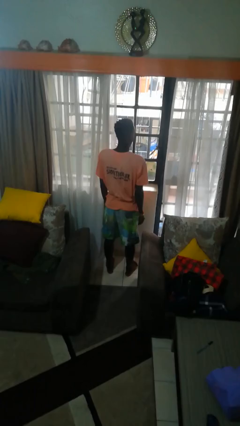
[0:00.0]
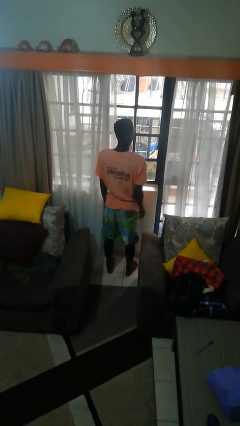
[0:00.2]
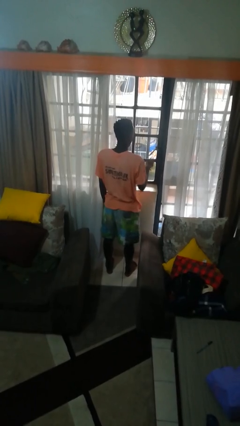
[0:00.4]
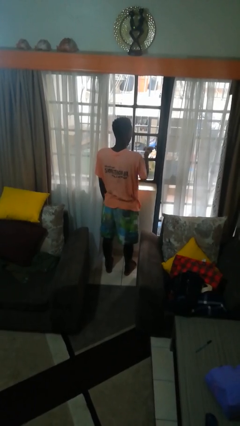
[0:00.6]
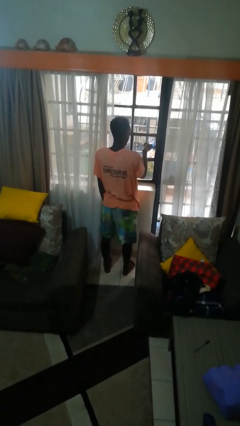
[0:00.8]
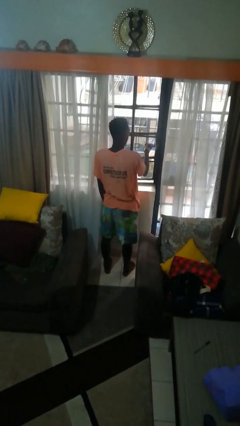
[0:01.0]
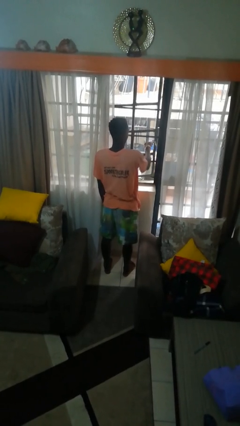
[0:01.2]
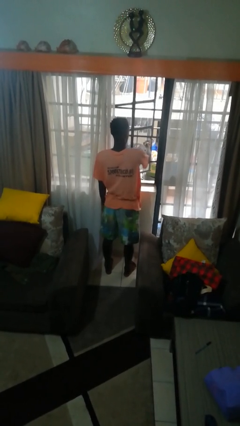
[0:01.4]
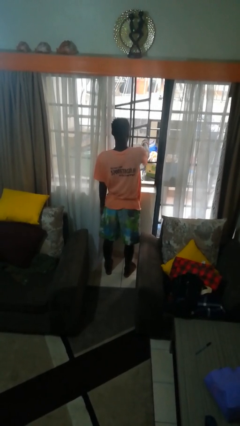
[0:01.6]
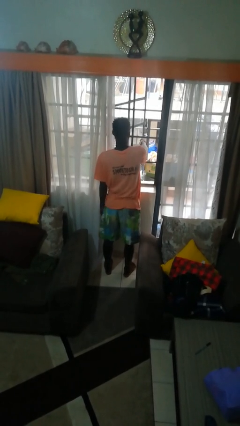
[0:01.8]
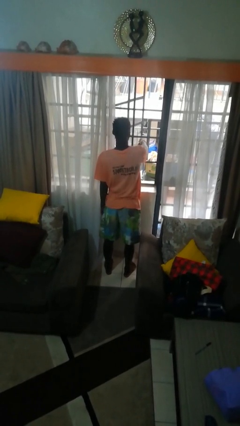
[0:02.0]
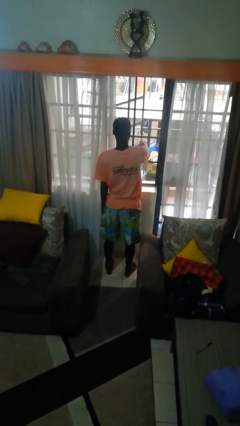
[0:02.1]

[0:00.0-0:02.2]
person opens home window

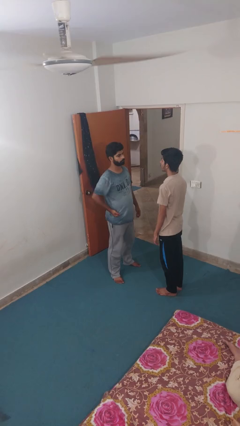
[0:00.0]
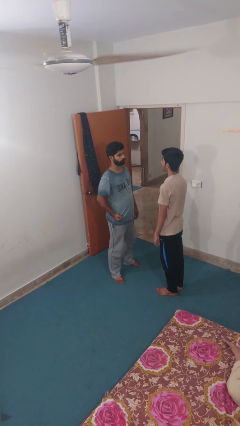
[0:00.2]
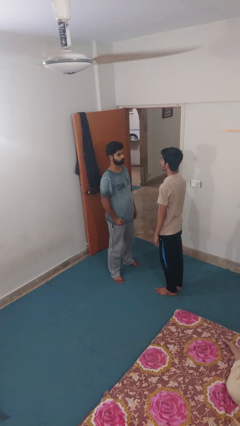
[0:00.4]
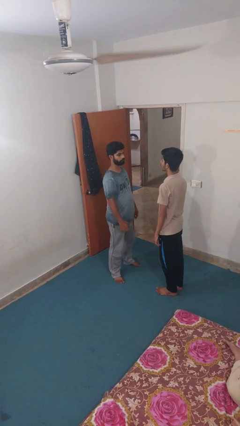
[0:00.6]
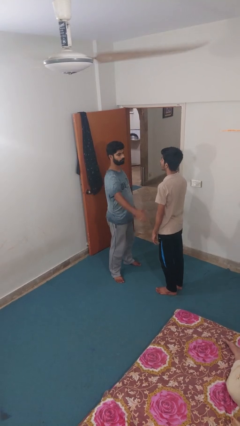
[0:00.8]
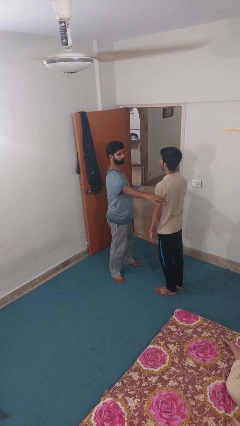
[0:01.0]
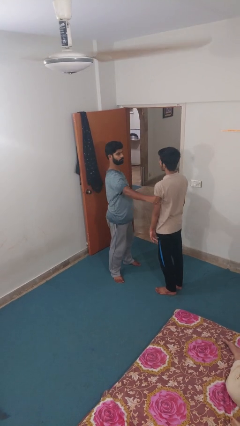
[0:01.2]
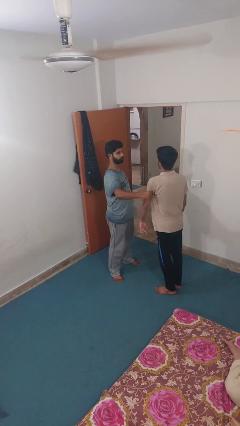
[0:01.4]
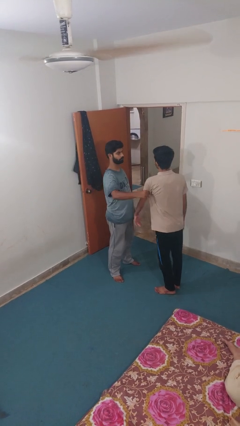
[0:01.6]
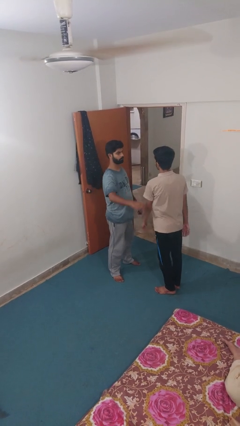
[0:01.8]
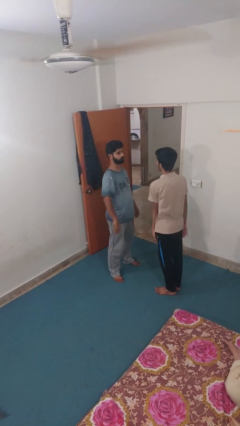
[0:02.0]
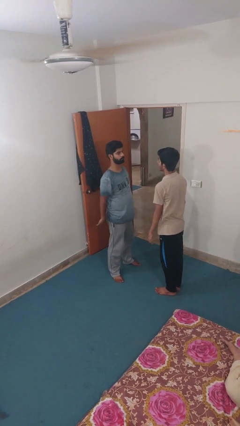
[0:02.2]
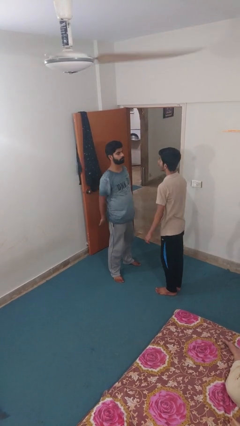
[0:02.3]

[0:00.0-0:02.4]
person grabs person by bicep

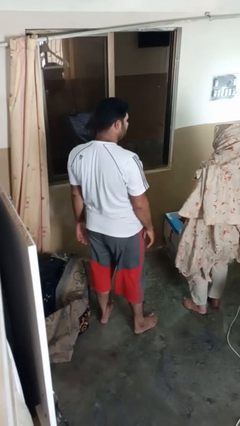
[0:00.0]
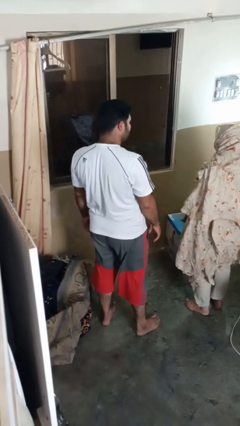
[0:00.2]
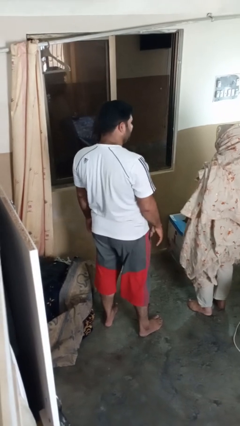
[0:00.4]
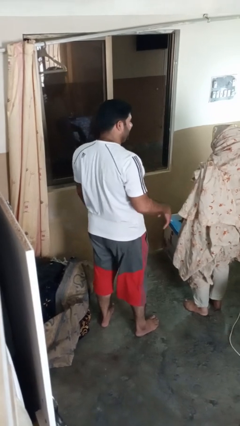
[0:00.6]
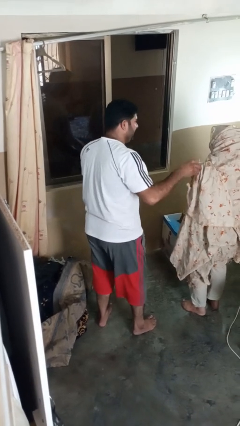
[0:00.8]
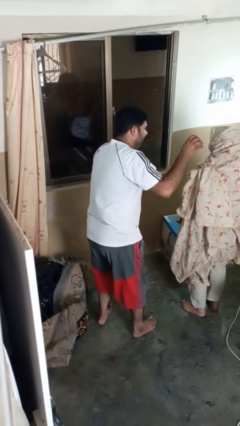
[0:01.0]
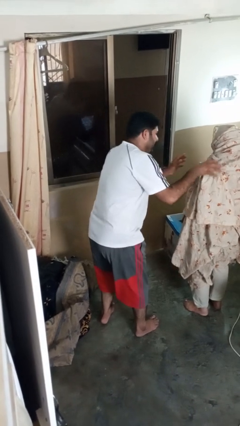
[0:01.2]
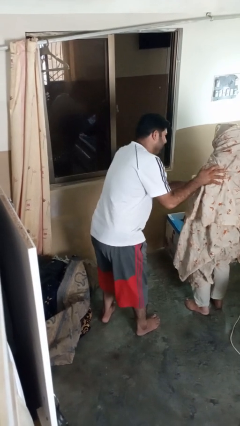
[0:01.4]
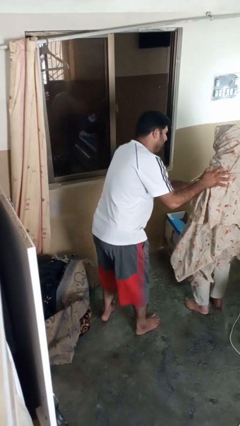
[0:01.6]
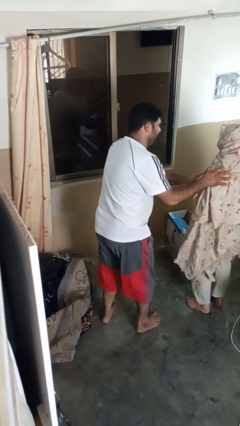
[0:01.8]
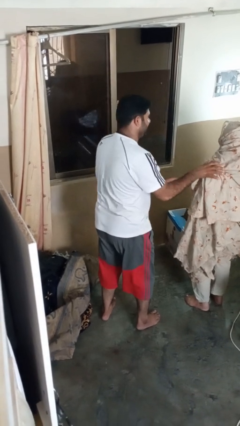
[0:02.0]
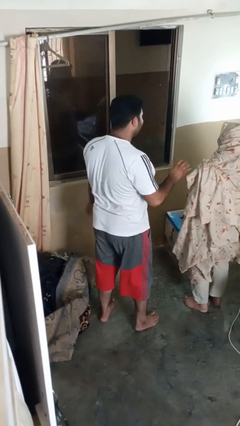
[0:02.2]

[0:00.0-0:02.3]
person laughs with person

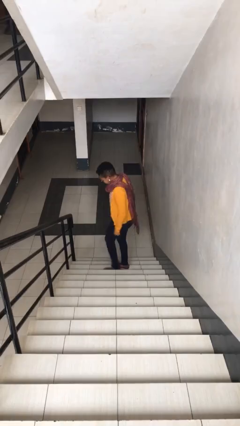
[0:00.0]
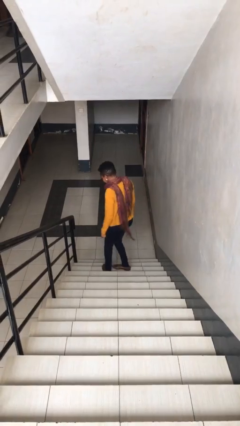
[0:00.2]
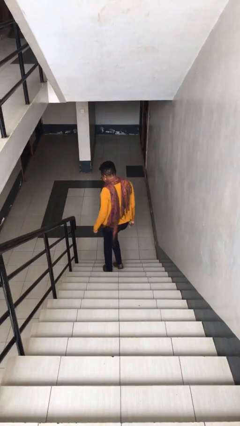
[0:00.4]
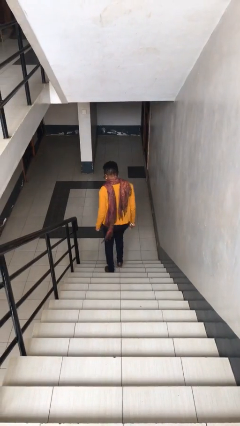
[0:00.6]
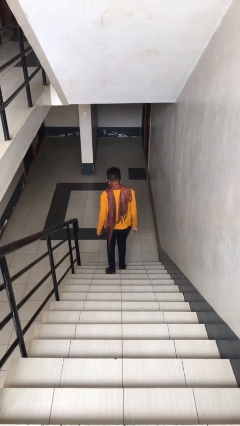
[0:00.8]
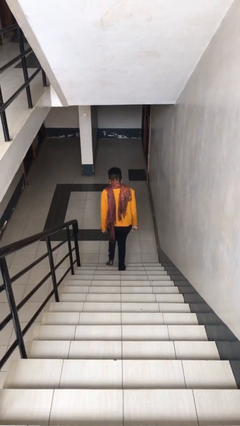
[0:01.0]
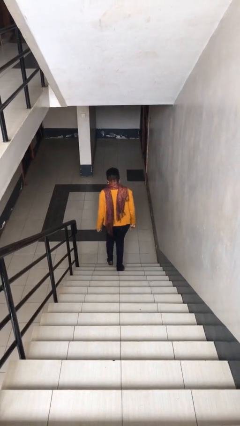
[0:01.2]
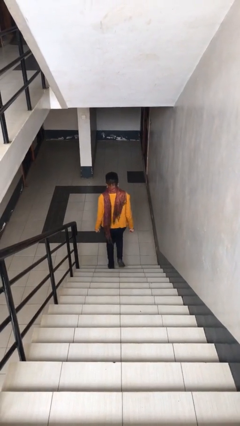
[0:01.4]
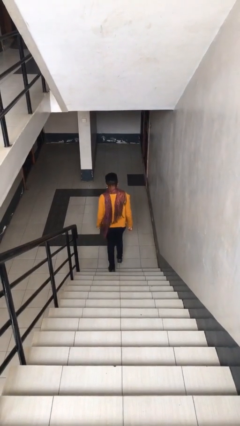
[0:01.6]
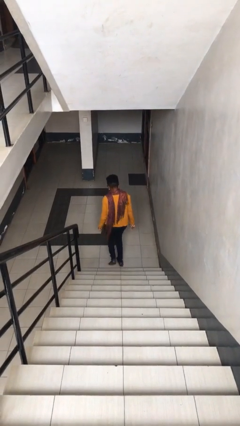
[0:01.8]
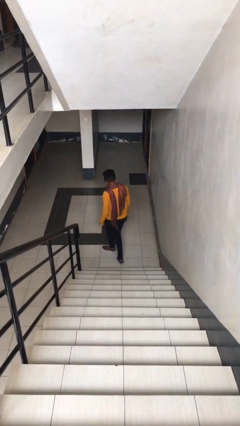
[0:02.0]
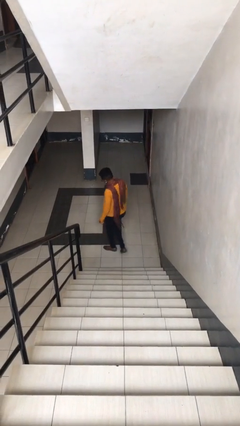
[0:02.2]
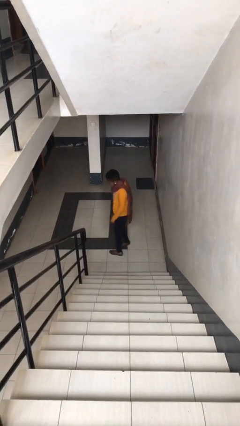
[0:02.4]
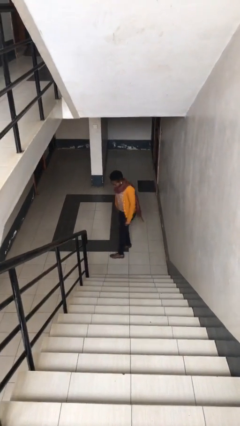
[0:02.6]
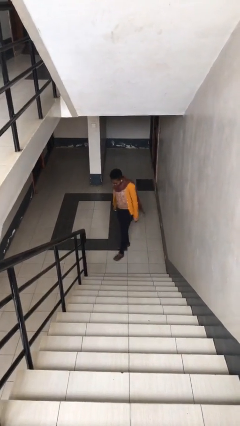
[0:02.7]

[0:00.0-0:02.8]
person climbs down stairs

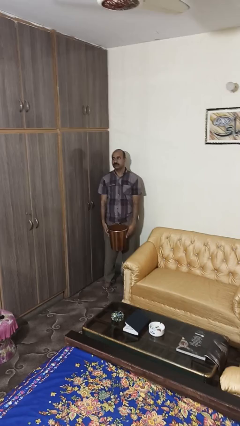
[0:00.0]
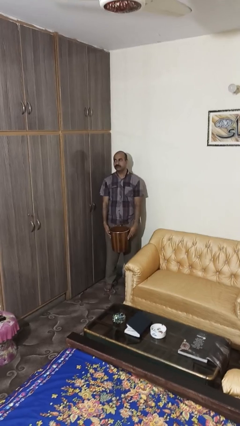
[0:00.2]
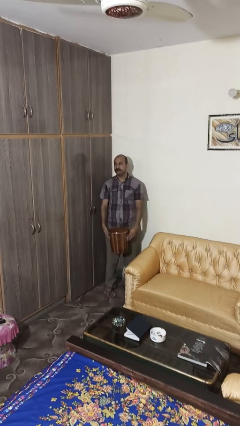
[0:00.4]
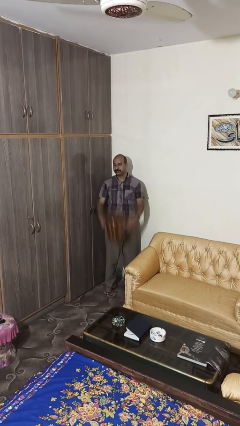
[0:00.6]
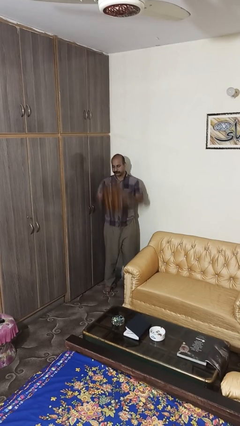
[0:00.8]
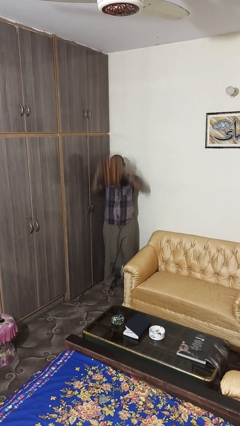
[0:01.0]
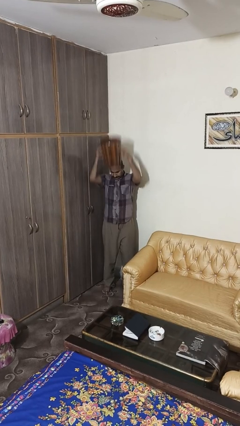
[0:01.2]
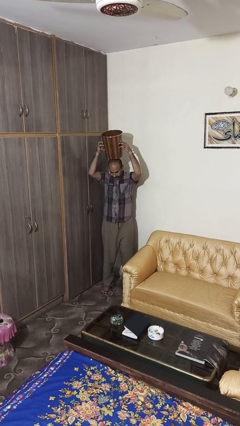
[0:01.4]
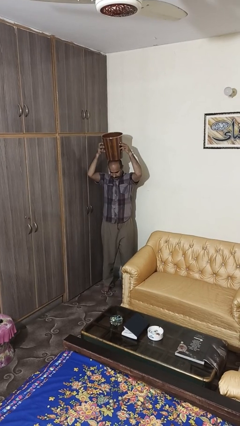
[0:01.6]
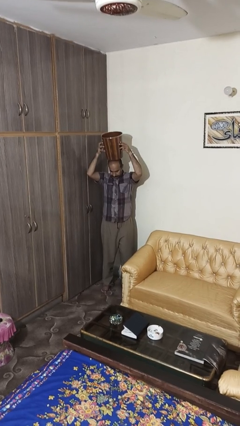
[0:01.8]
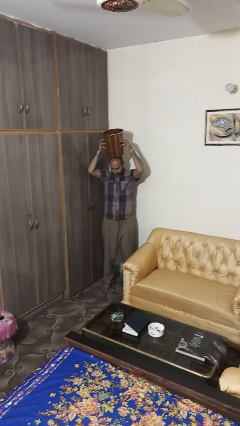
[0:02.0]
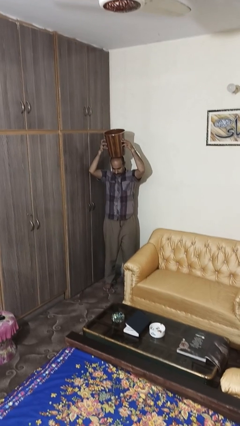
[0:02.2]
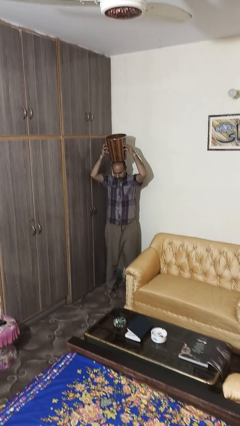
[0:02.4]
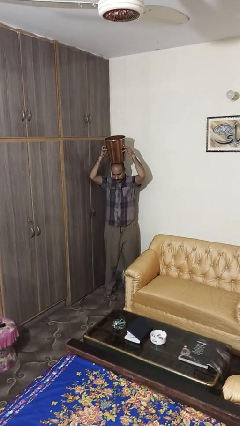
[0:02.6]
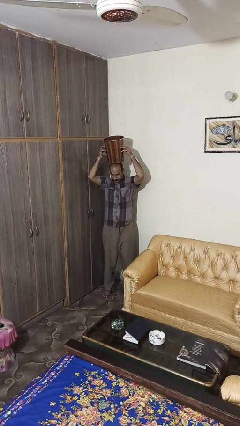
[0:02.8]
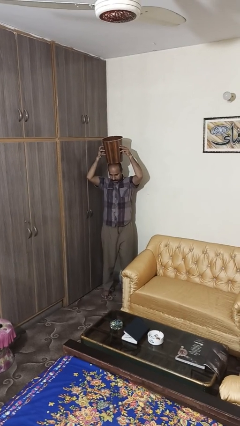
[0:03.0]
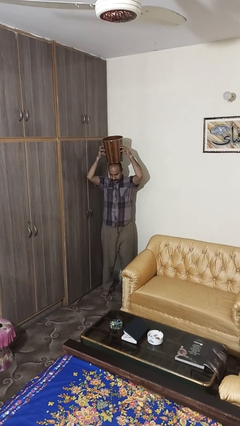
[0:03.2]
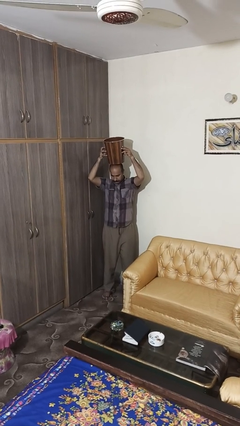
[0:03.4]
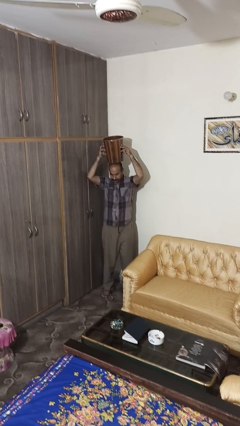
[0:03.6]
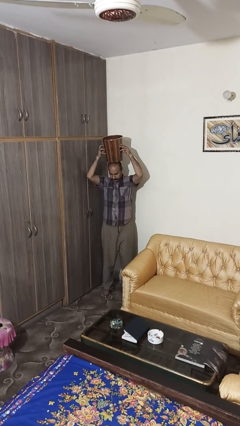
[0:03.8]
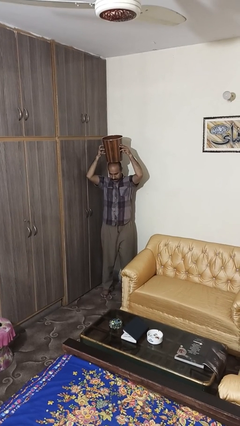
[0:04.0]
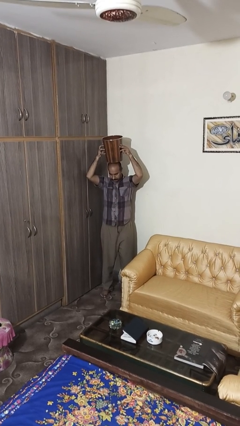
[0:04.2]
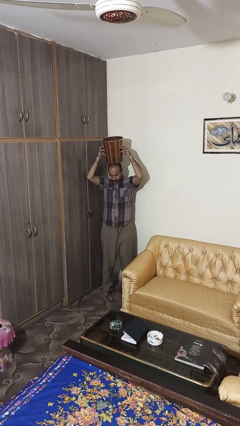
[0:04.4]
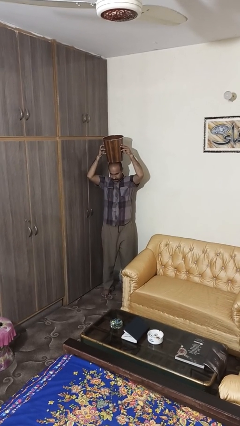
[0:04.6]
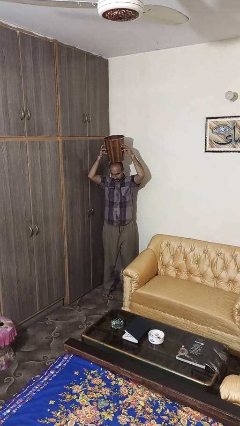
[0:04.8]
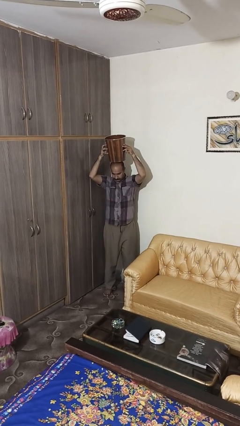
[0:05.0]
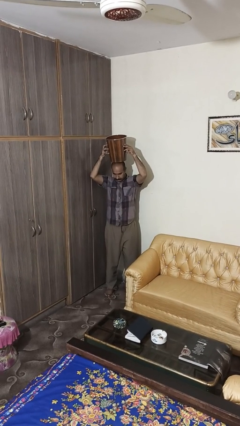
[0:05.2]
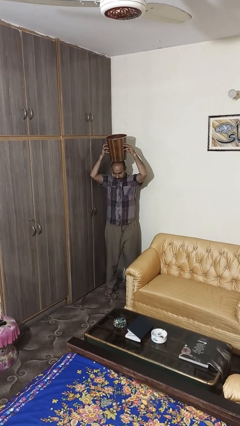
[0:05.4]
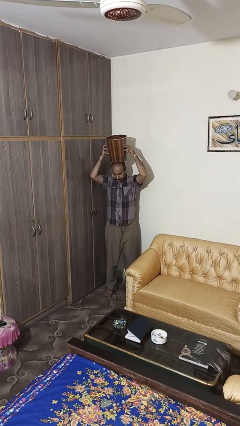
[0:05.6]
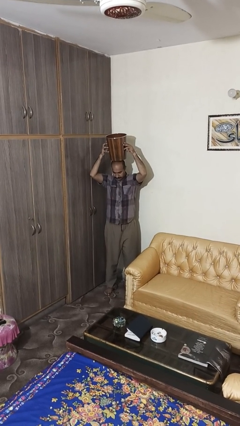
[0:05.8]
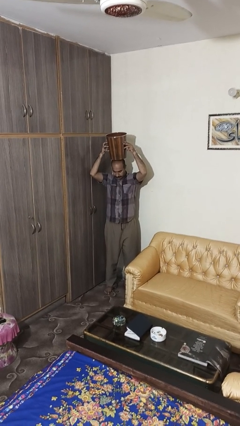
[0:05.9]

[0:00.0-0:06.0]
person holds object above head

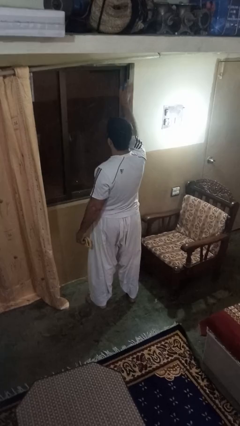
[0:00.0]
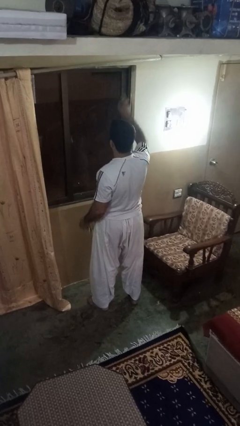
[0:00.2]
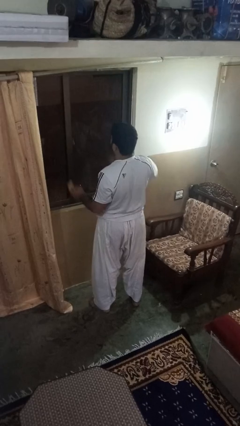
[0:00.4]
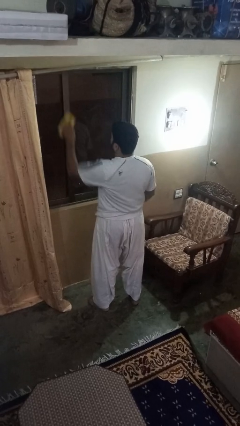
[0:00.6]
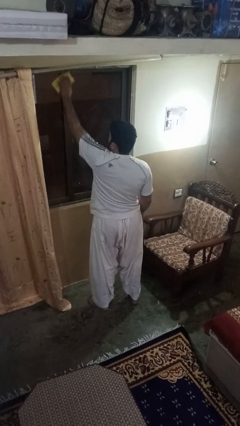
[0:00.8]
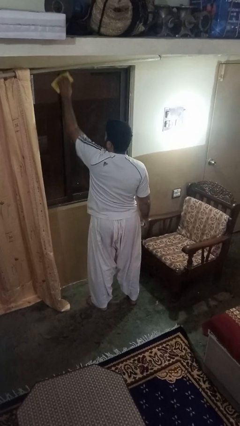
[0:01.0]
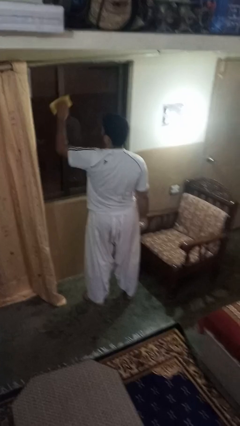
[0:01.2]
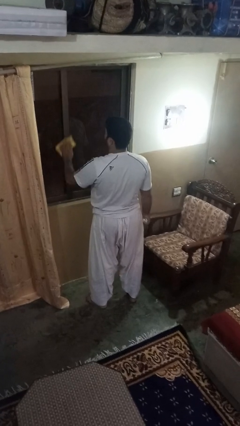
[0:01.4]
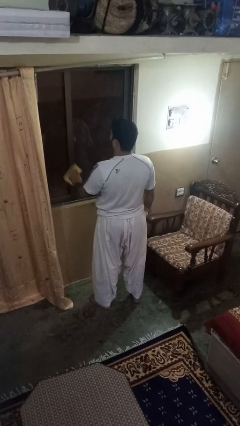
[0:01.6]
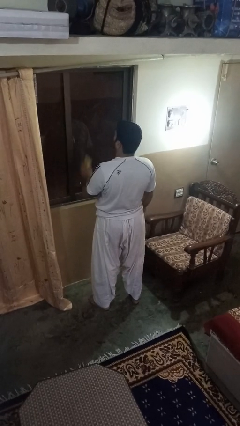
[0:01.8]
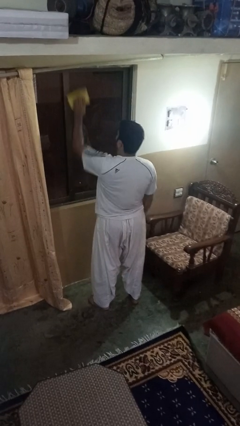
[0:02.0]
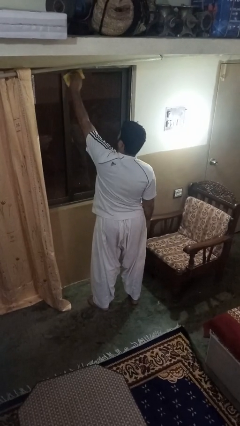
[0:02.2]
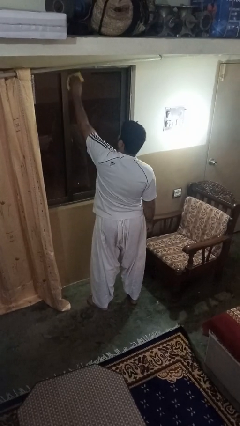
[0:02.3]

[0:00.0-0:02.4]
person washes window
